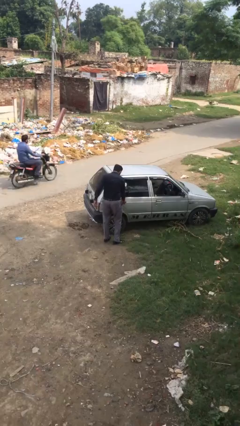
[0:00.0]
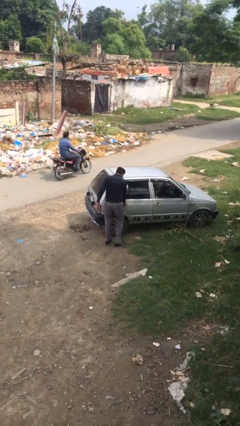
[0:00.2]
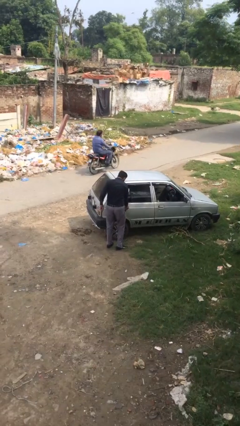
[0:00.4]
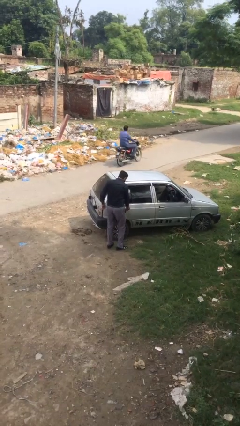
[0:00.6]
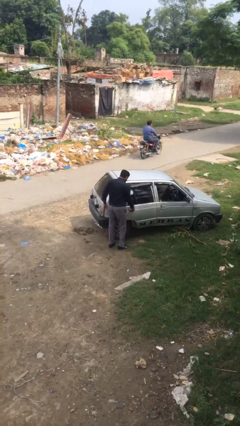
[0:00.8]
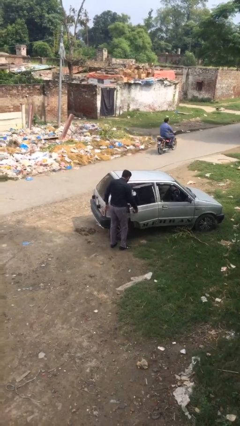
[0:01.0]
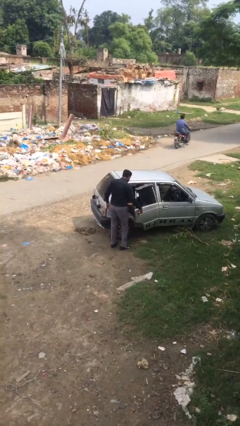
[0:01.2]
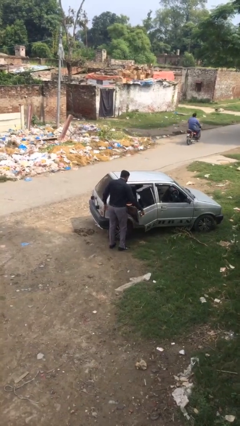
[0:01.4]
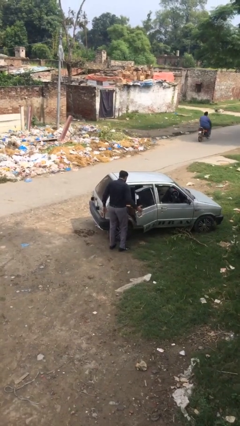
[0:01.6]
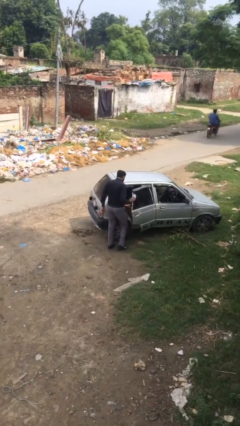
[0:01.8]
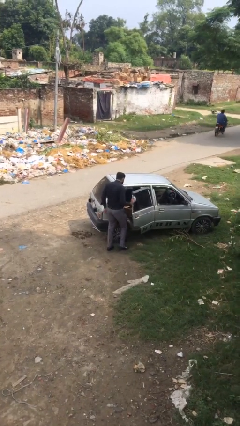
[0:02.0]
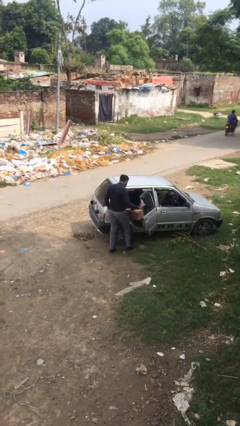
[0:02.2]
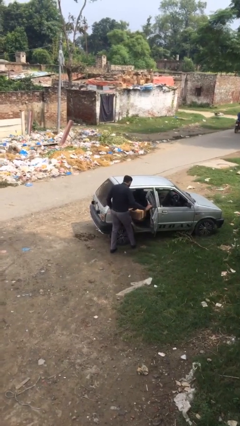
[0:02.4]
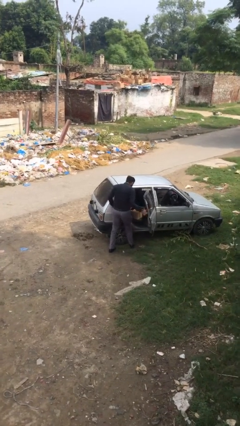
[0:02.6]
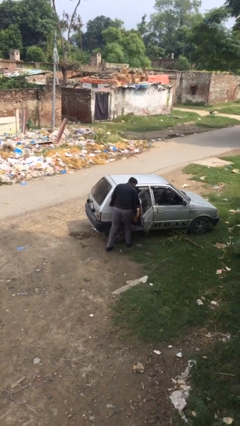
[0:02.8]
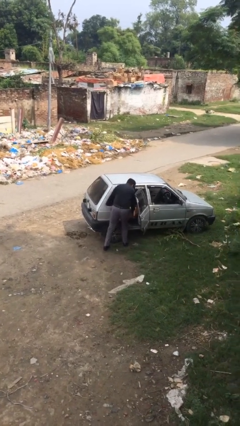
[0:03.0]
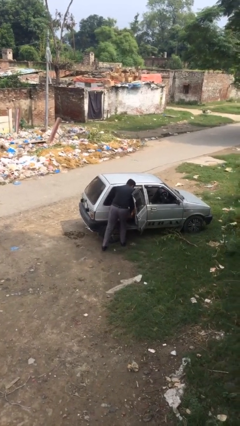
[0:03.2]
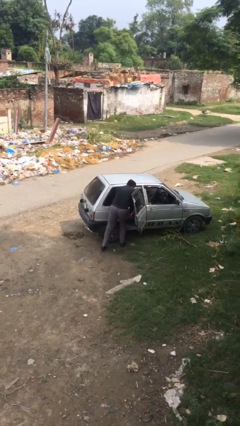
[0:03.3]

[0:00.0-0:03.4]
person opens car door

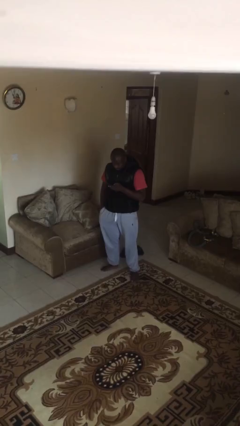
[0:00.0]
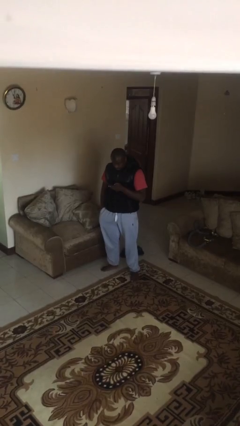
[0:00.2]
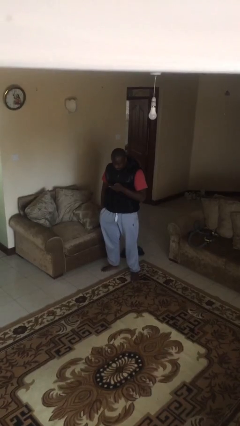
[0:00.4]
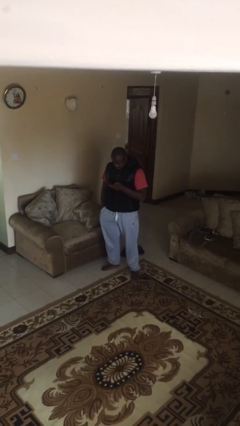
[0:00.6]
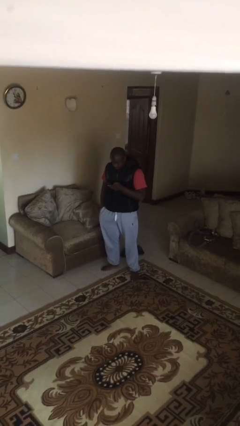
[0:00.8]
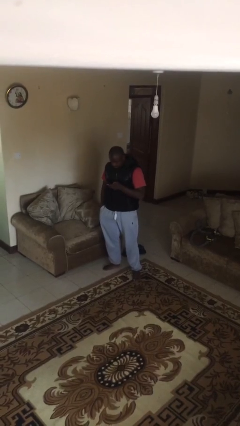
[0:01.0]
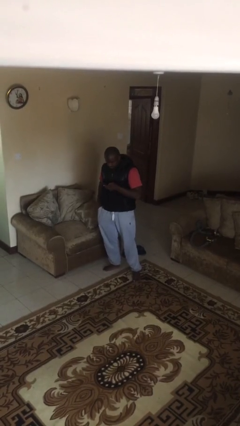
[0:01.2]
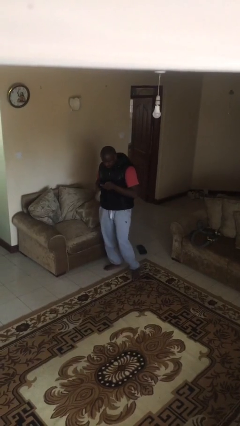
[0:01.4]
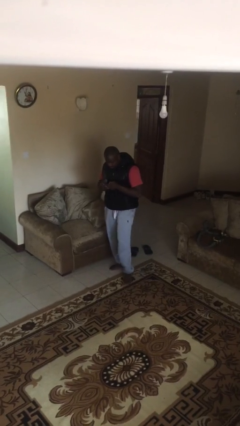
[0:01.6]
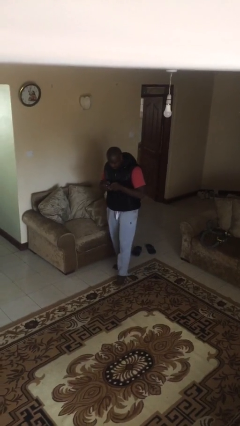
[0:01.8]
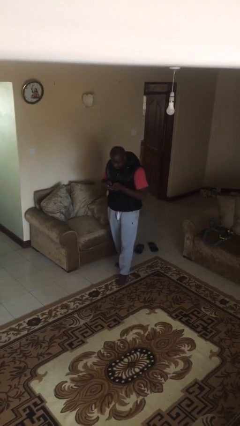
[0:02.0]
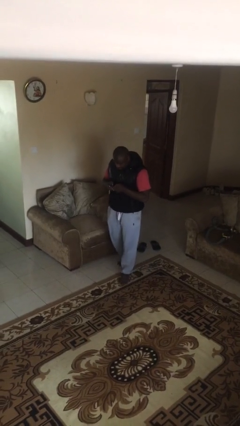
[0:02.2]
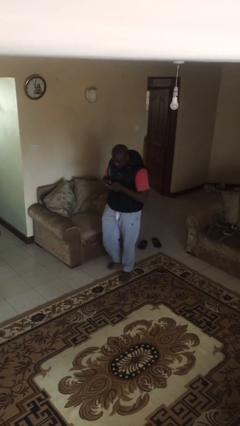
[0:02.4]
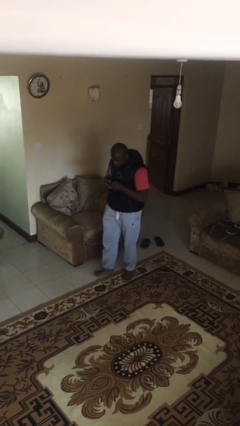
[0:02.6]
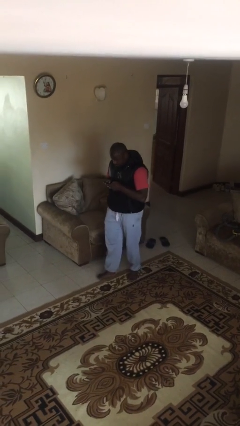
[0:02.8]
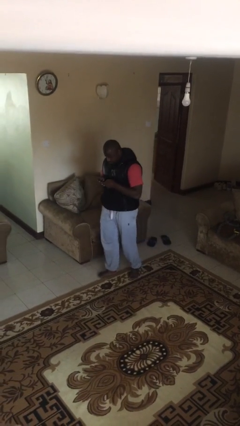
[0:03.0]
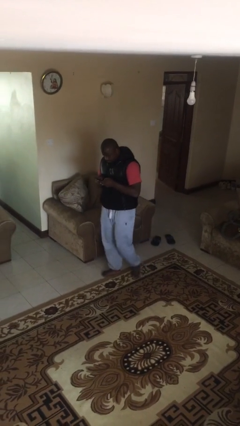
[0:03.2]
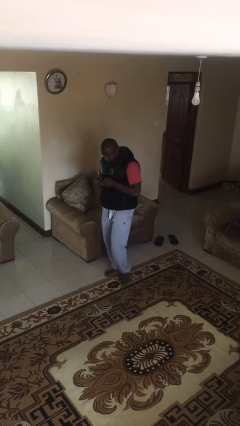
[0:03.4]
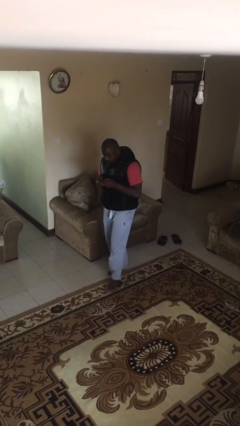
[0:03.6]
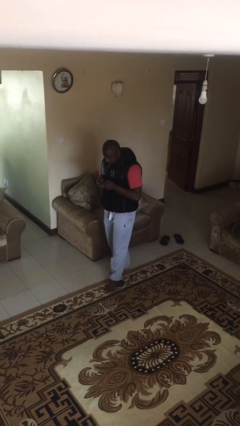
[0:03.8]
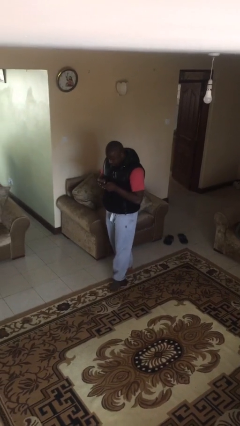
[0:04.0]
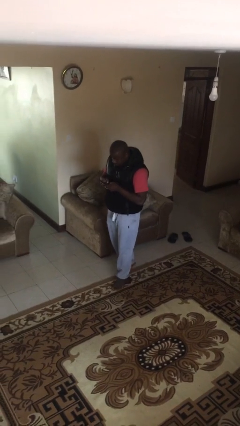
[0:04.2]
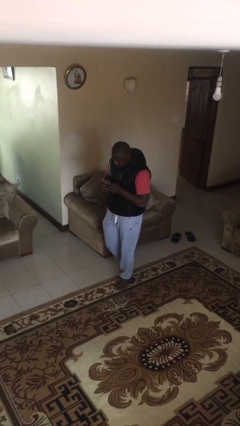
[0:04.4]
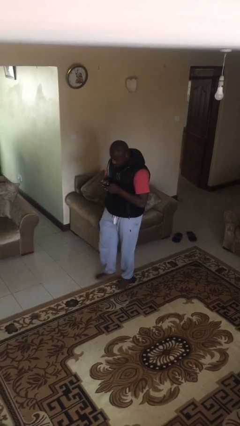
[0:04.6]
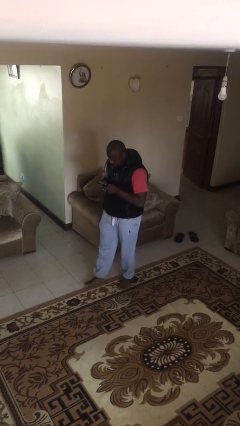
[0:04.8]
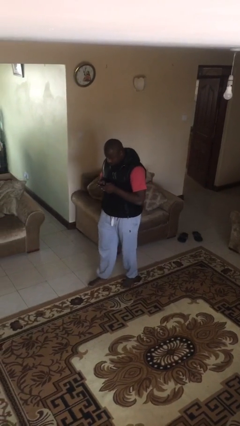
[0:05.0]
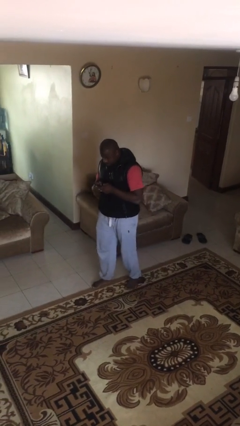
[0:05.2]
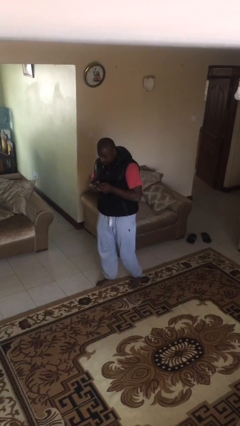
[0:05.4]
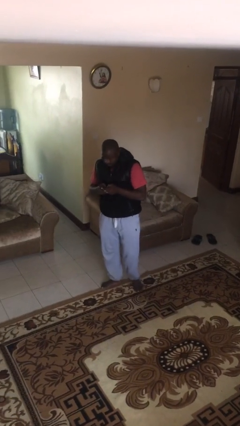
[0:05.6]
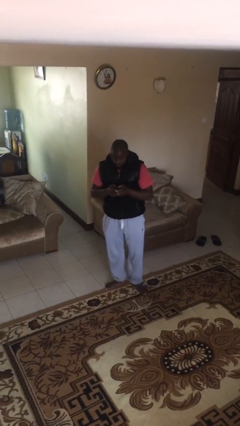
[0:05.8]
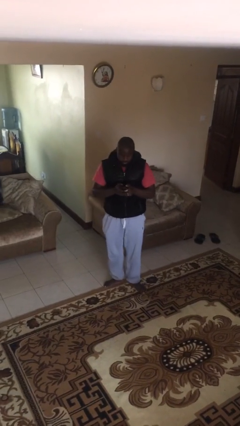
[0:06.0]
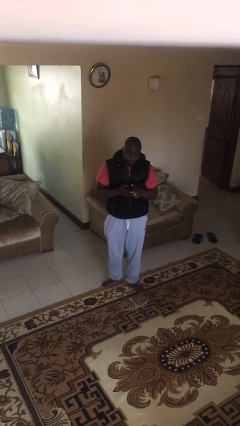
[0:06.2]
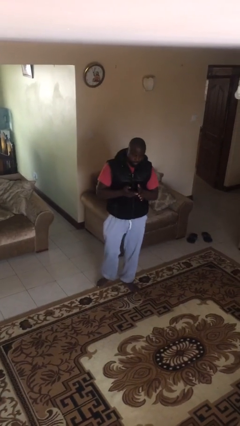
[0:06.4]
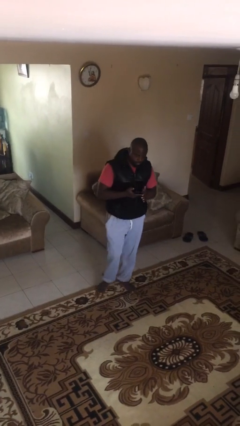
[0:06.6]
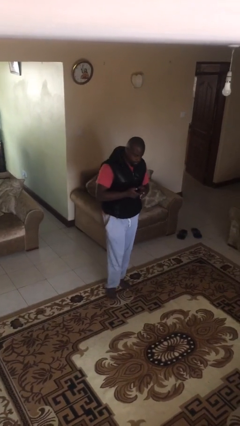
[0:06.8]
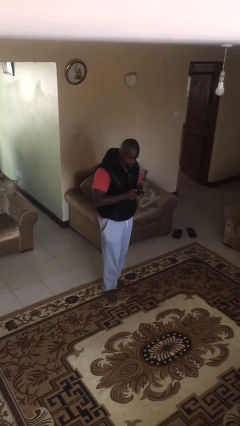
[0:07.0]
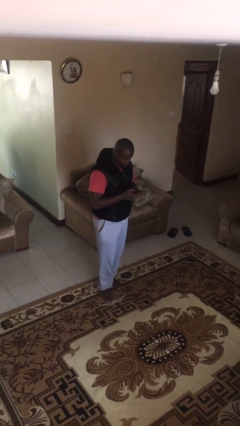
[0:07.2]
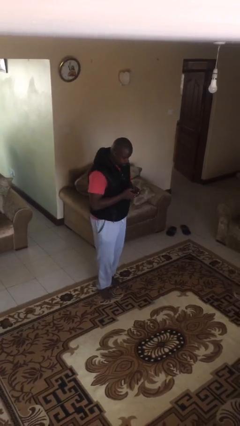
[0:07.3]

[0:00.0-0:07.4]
person texts on phone

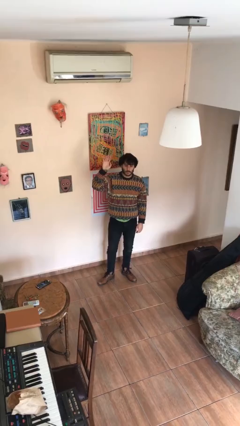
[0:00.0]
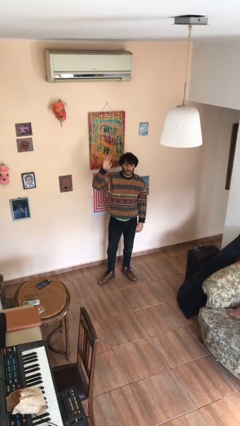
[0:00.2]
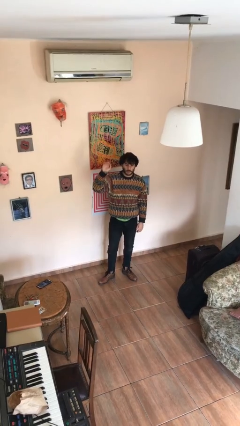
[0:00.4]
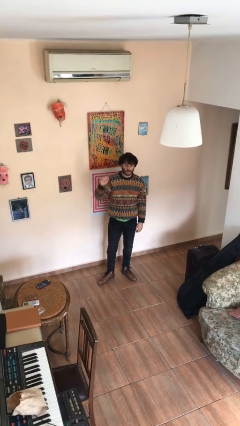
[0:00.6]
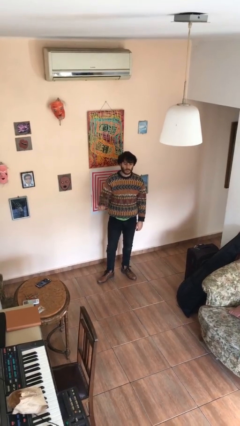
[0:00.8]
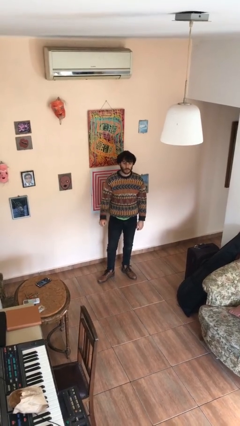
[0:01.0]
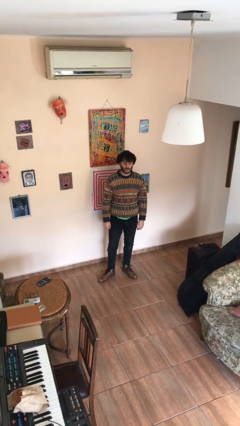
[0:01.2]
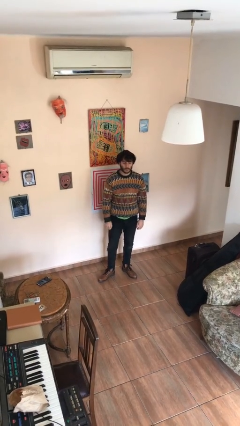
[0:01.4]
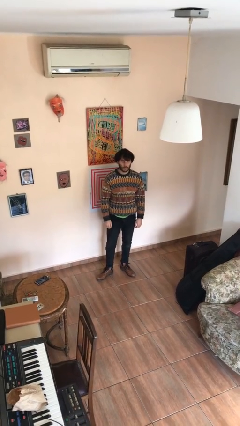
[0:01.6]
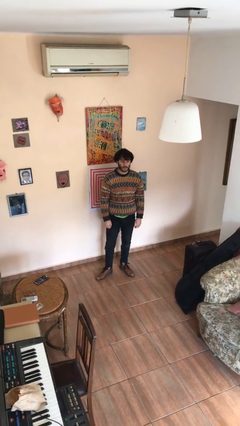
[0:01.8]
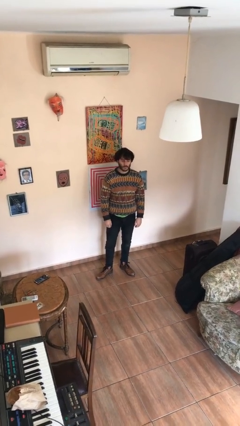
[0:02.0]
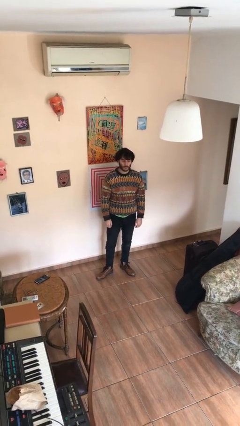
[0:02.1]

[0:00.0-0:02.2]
person gestures lower hand

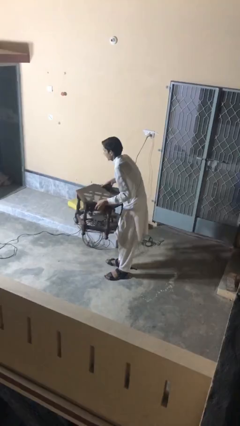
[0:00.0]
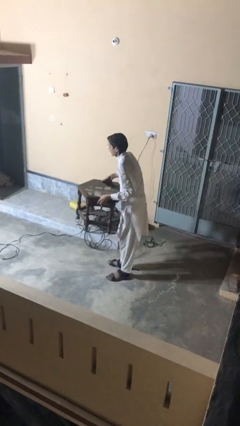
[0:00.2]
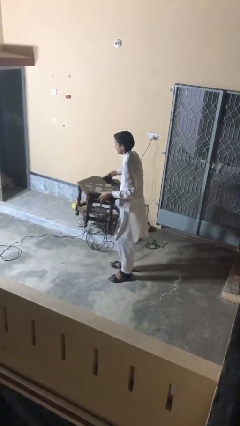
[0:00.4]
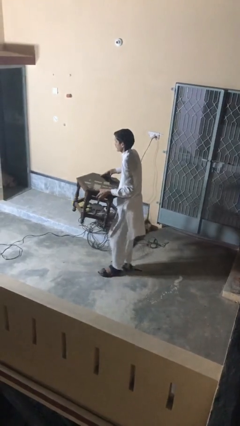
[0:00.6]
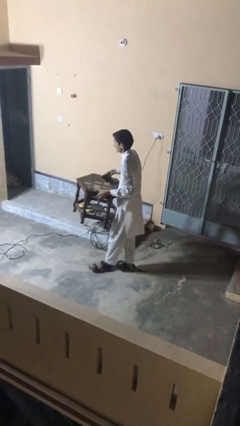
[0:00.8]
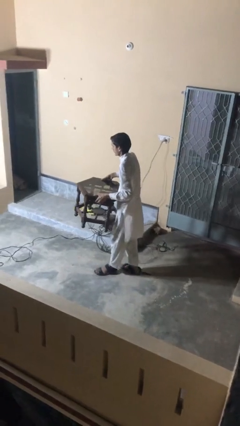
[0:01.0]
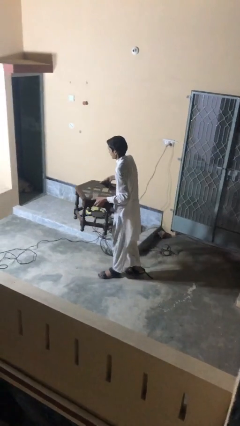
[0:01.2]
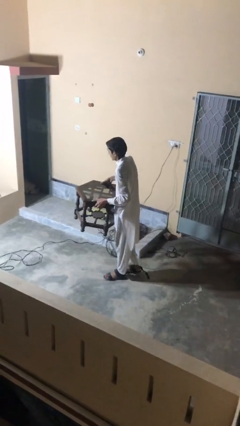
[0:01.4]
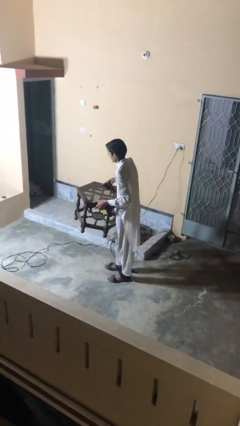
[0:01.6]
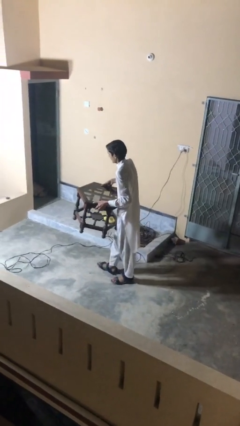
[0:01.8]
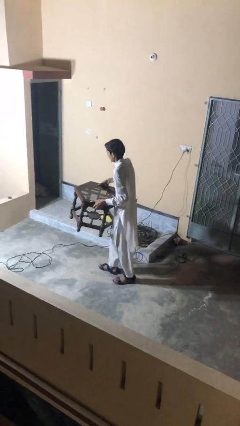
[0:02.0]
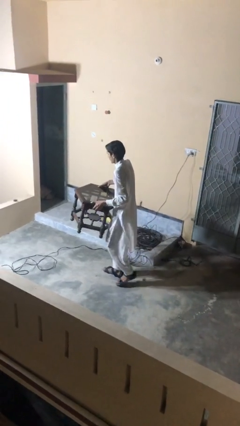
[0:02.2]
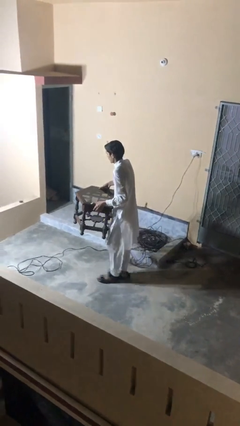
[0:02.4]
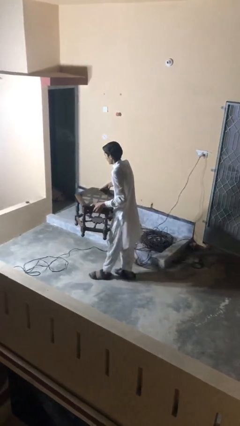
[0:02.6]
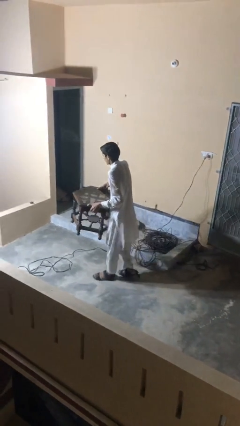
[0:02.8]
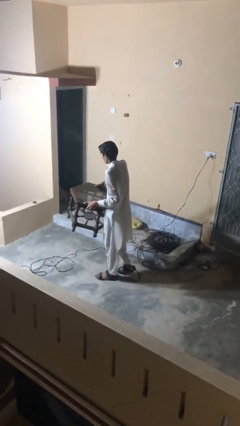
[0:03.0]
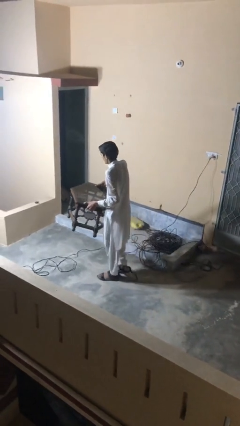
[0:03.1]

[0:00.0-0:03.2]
person carries heavy object

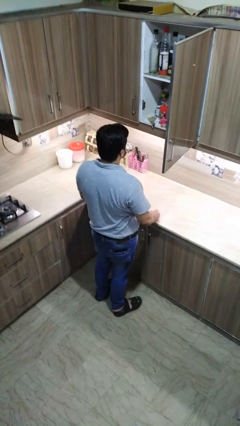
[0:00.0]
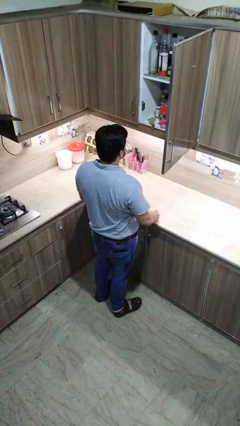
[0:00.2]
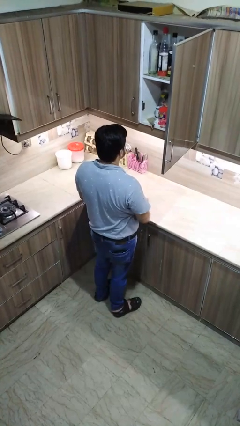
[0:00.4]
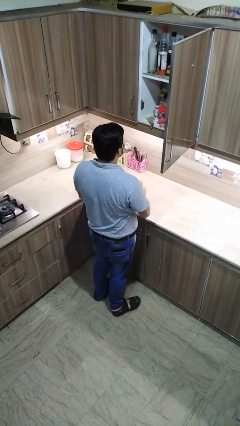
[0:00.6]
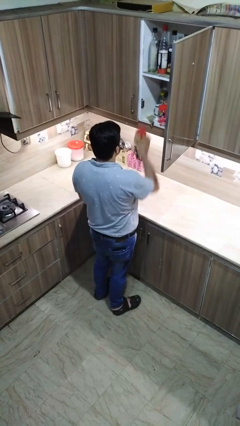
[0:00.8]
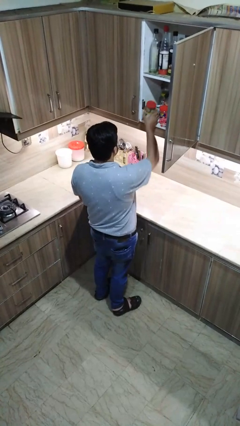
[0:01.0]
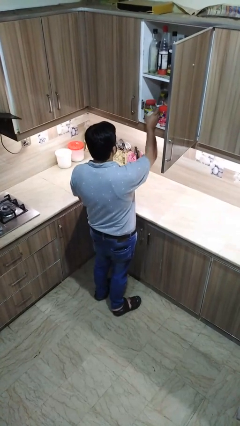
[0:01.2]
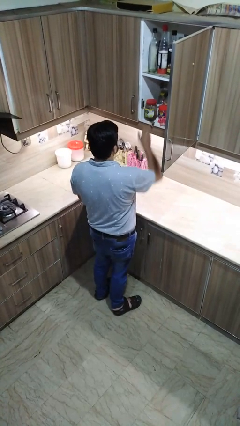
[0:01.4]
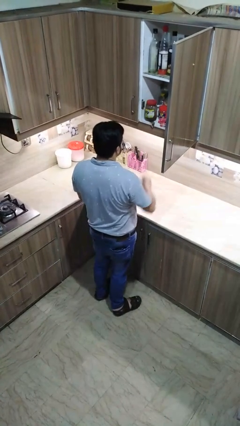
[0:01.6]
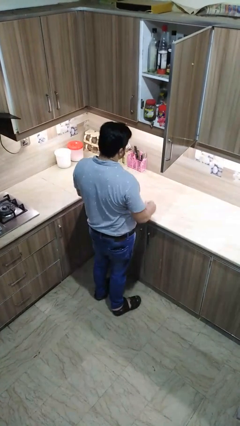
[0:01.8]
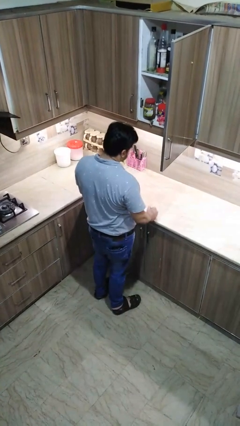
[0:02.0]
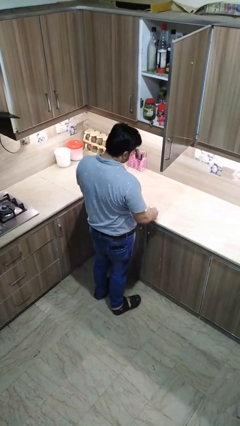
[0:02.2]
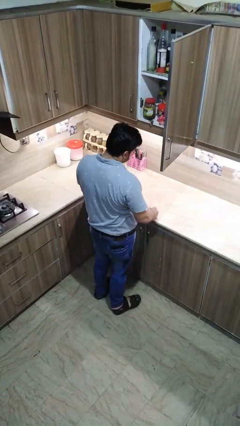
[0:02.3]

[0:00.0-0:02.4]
person takes object from cabinet
